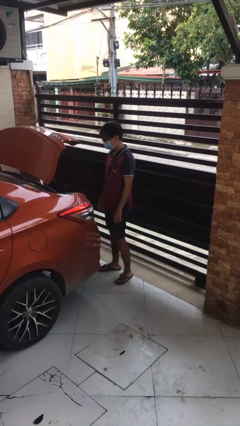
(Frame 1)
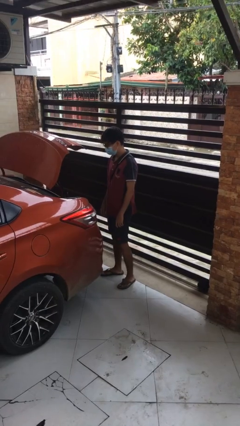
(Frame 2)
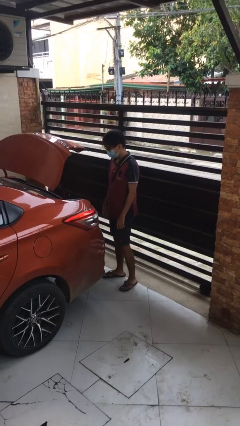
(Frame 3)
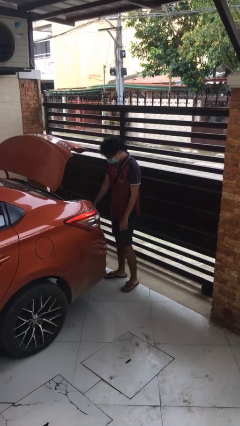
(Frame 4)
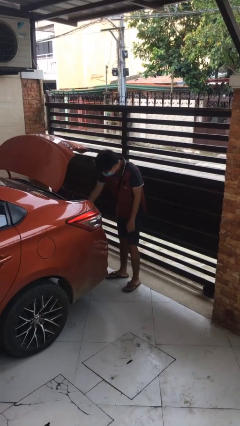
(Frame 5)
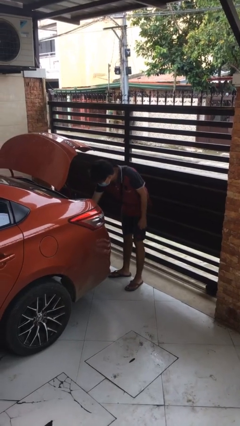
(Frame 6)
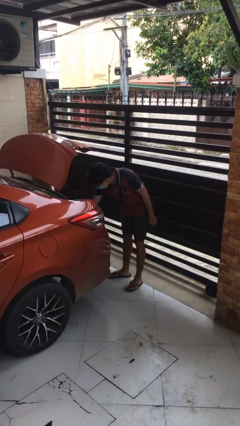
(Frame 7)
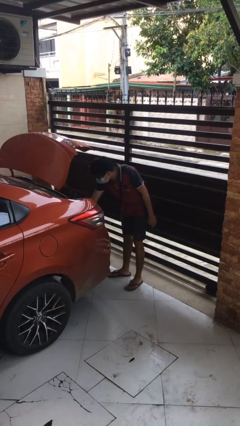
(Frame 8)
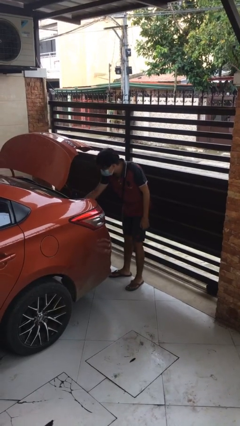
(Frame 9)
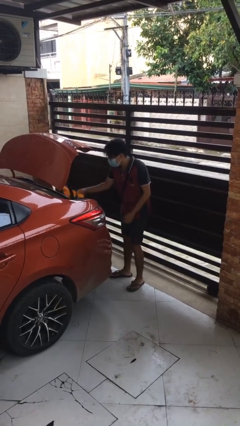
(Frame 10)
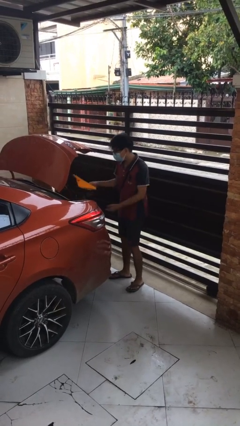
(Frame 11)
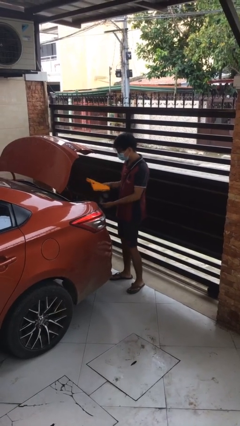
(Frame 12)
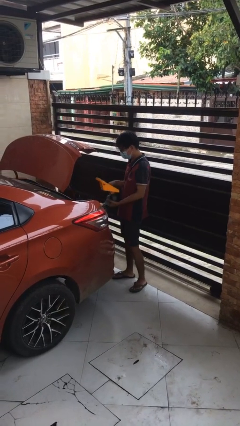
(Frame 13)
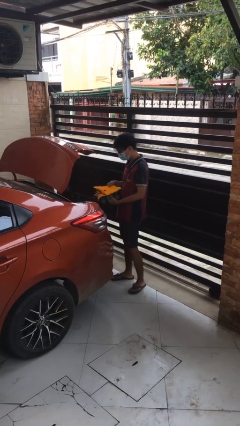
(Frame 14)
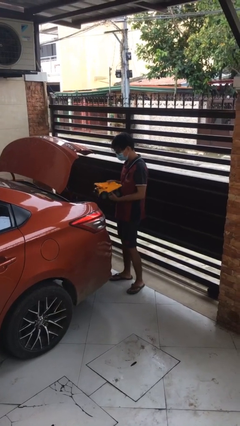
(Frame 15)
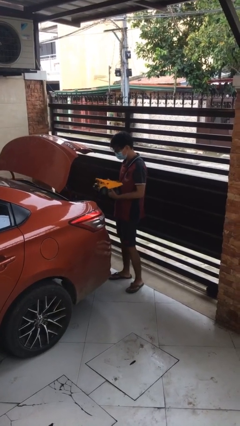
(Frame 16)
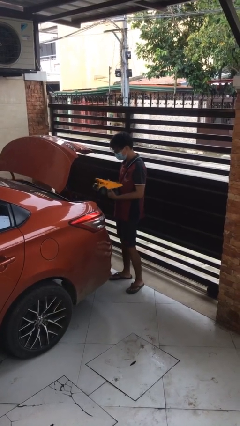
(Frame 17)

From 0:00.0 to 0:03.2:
person unloads car

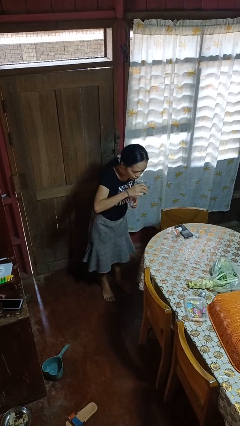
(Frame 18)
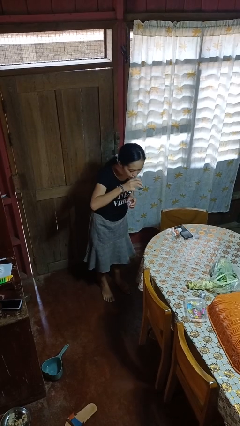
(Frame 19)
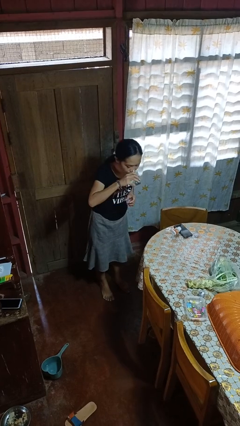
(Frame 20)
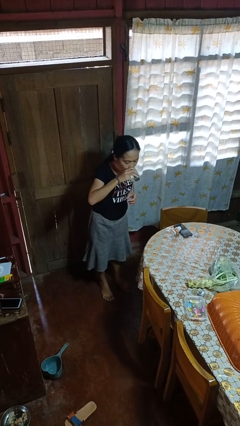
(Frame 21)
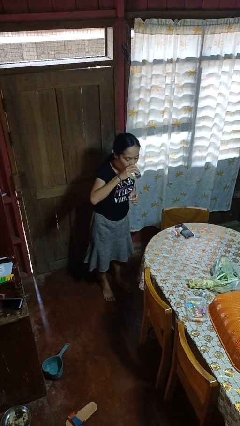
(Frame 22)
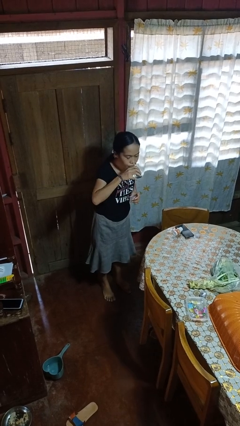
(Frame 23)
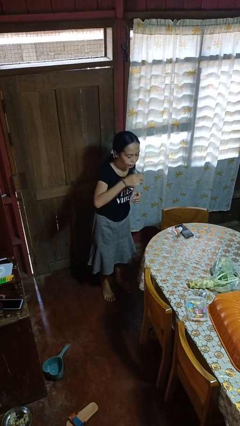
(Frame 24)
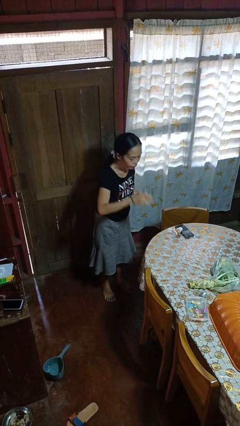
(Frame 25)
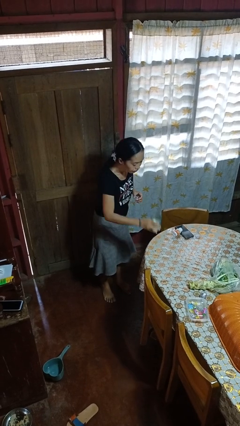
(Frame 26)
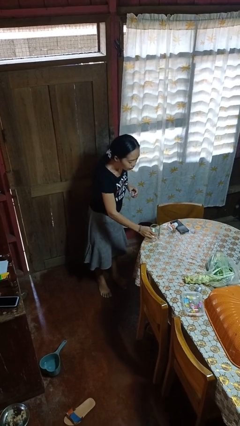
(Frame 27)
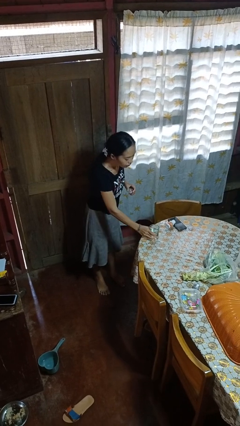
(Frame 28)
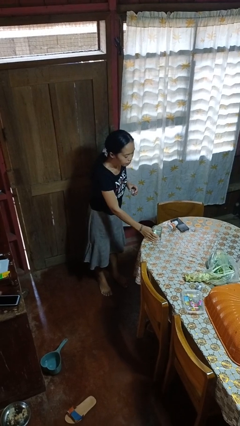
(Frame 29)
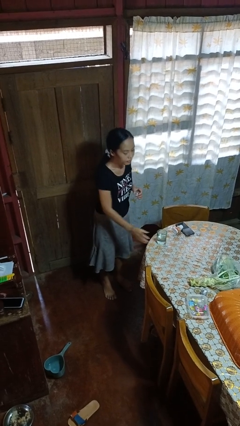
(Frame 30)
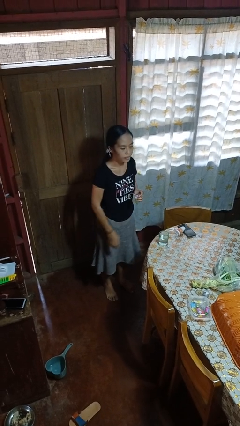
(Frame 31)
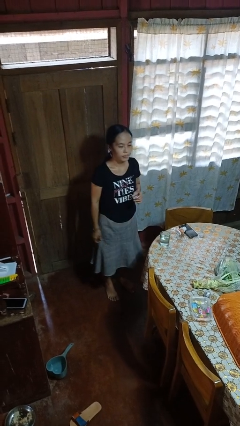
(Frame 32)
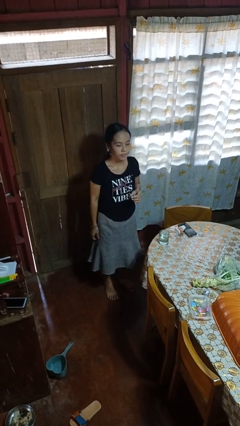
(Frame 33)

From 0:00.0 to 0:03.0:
person drinks from cup

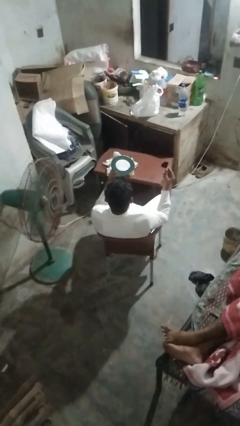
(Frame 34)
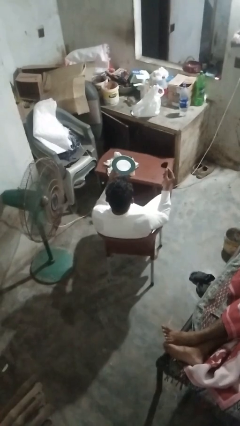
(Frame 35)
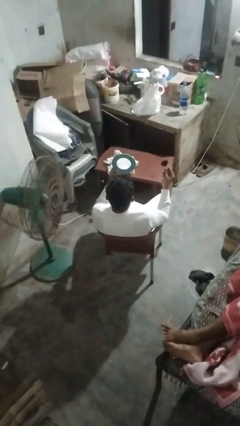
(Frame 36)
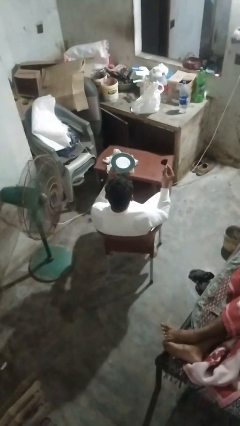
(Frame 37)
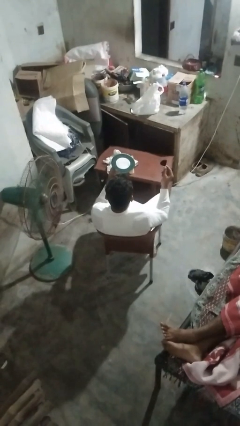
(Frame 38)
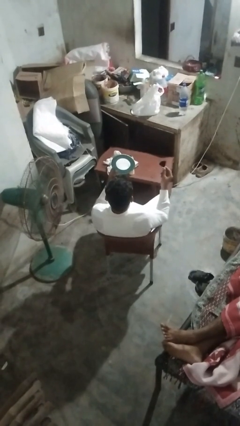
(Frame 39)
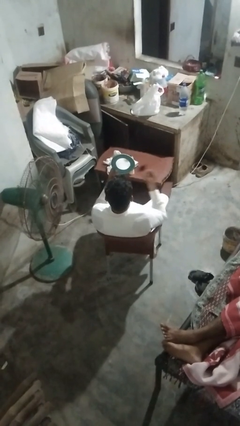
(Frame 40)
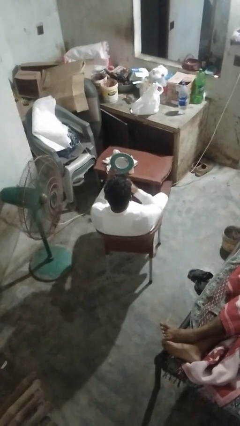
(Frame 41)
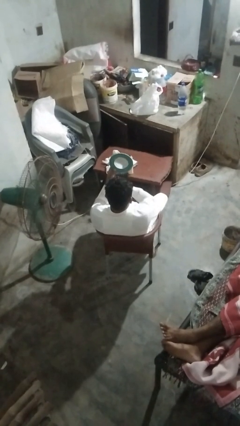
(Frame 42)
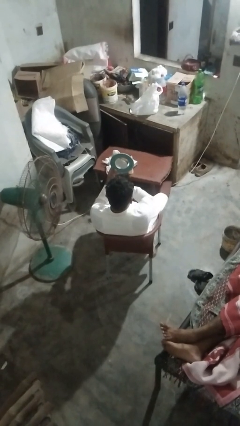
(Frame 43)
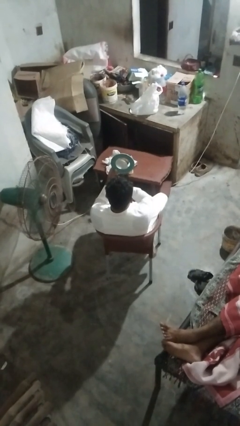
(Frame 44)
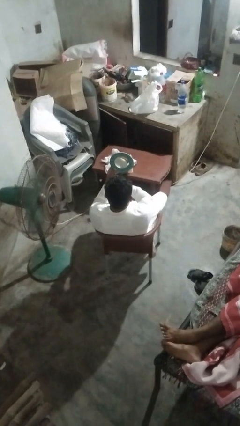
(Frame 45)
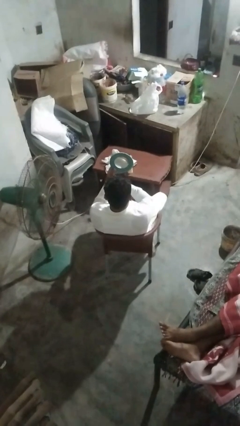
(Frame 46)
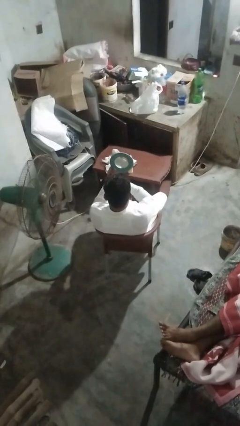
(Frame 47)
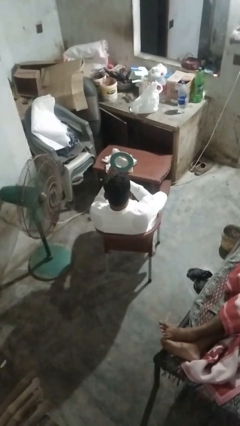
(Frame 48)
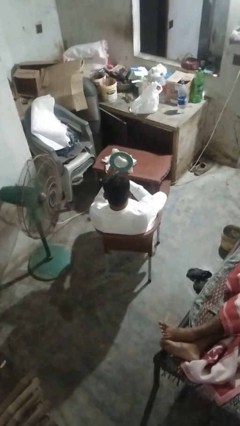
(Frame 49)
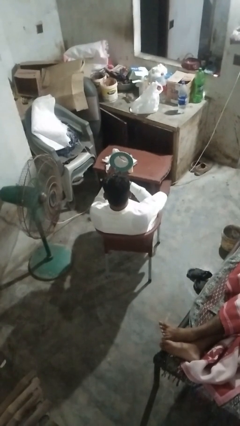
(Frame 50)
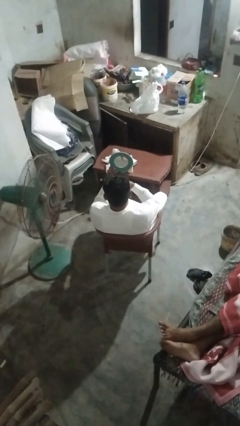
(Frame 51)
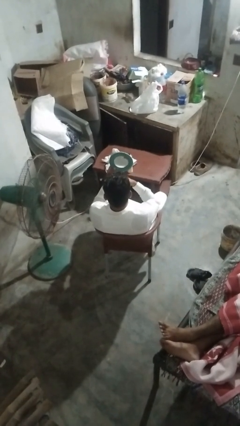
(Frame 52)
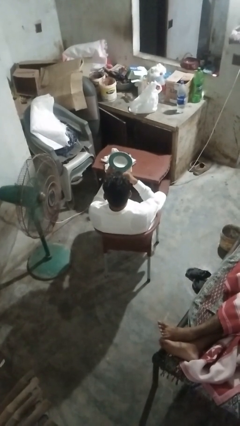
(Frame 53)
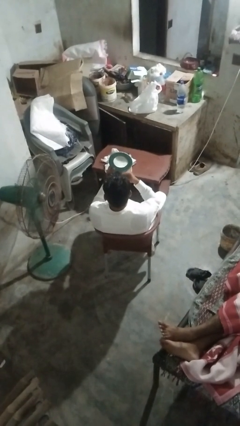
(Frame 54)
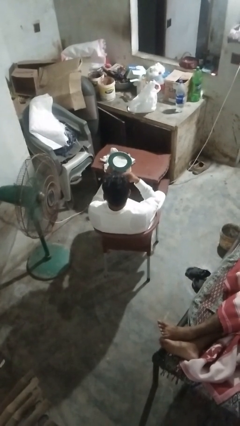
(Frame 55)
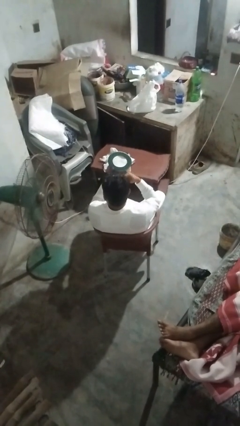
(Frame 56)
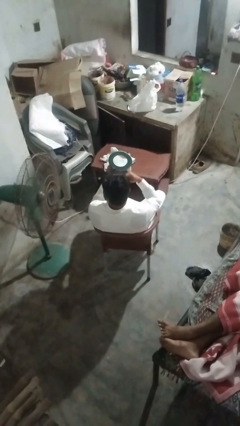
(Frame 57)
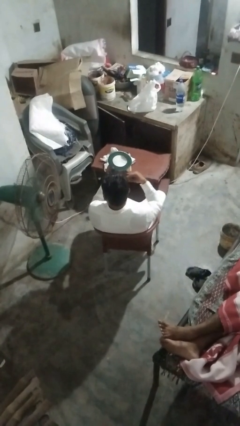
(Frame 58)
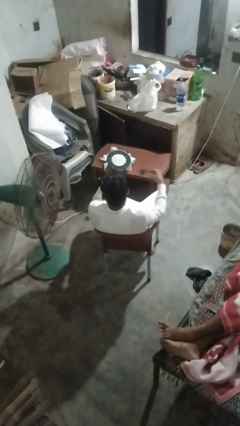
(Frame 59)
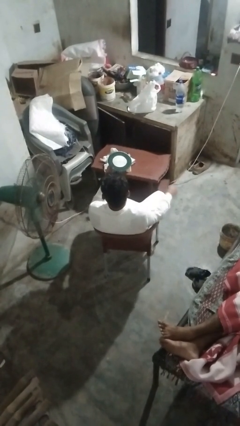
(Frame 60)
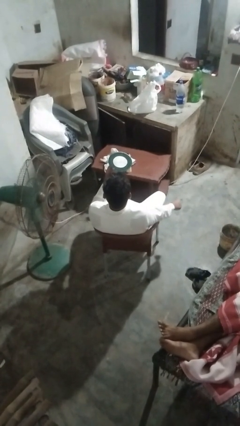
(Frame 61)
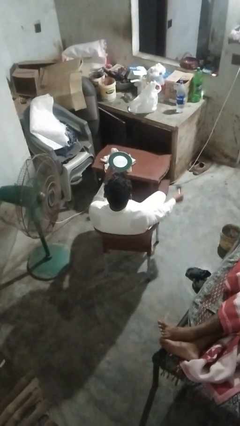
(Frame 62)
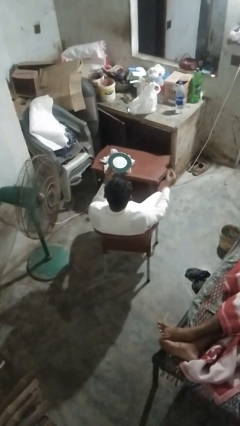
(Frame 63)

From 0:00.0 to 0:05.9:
person applies foundation makeup

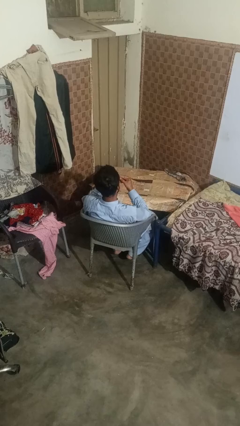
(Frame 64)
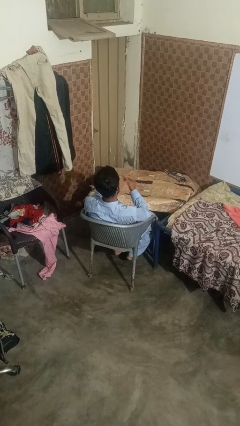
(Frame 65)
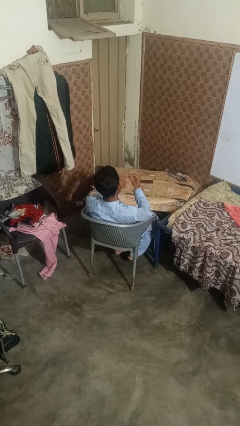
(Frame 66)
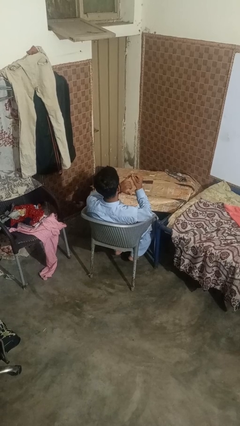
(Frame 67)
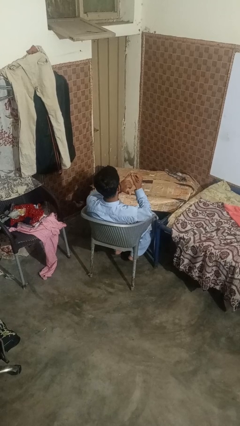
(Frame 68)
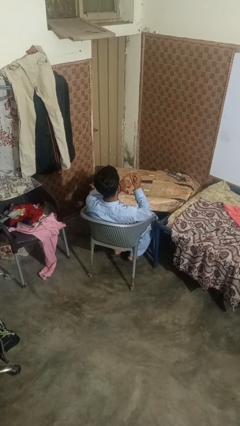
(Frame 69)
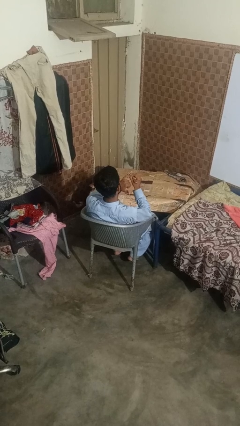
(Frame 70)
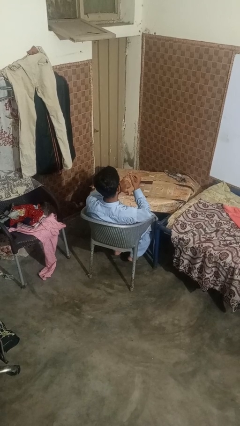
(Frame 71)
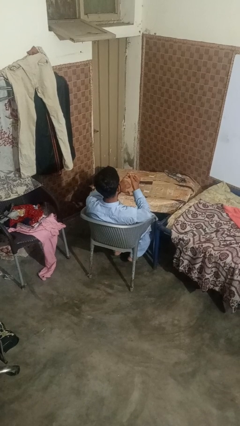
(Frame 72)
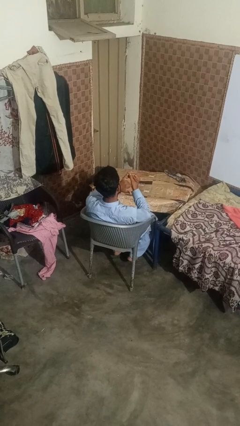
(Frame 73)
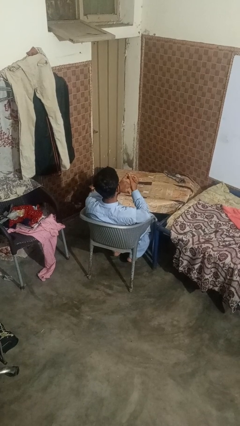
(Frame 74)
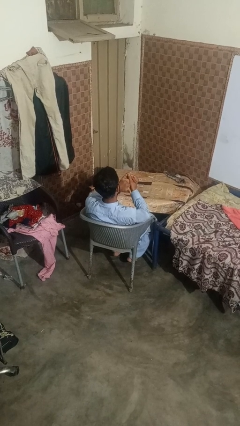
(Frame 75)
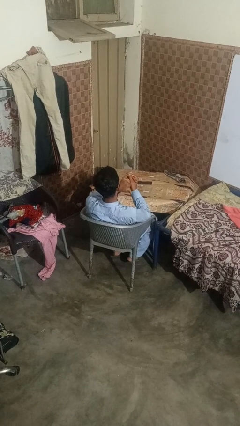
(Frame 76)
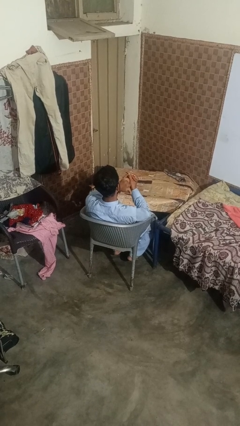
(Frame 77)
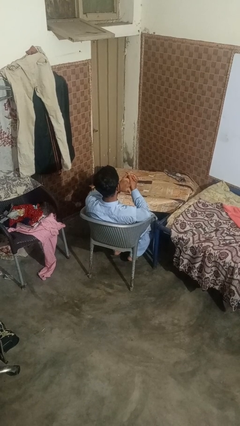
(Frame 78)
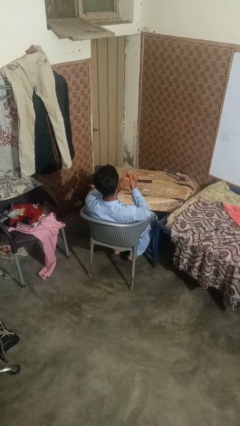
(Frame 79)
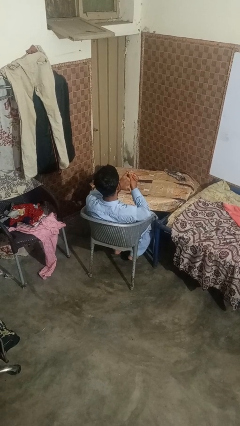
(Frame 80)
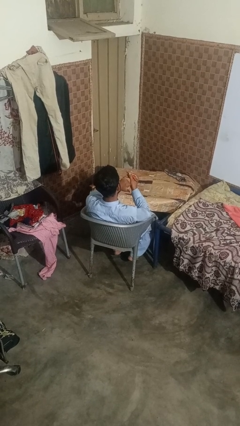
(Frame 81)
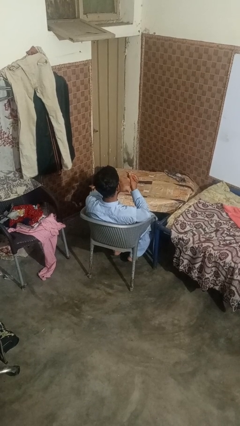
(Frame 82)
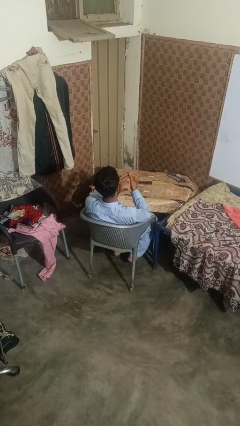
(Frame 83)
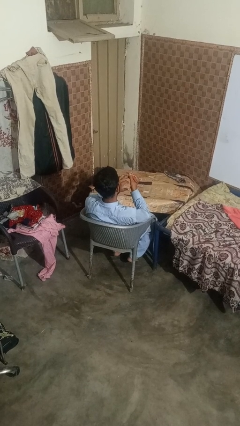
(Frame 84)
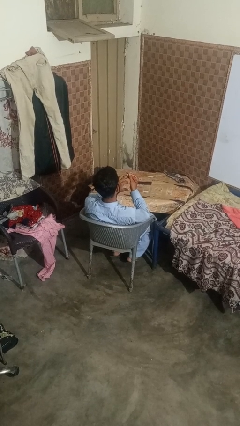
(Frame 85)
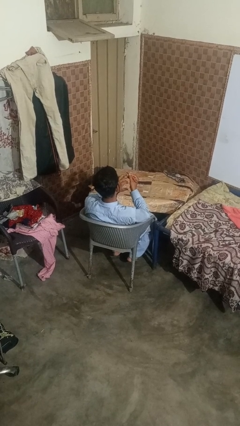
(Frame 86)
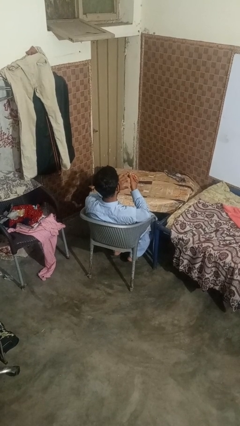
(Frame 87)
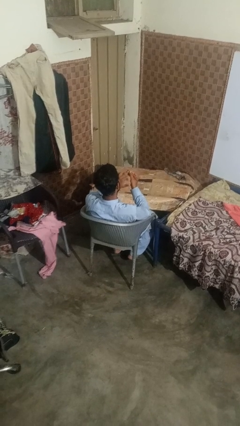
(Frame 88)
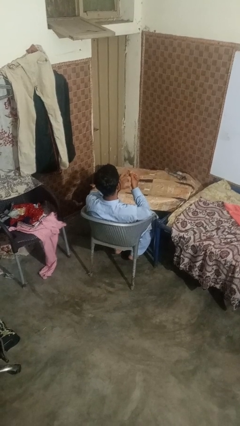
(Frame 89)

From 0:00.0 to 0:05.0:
person files fingernails

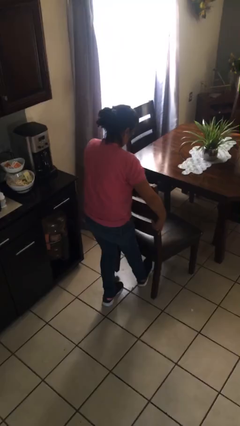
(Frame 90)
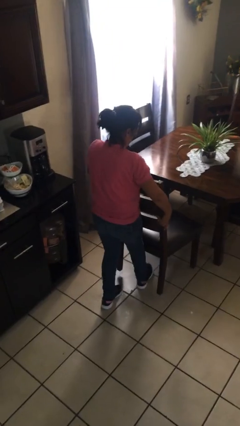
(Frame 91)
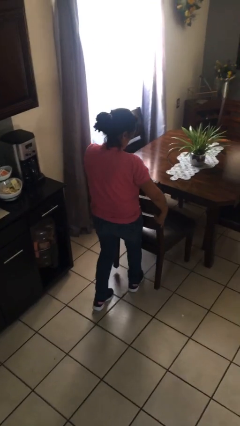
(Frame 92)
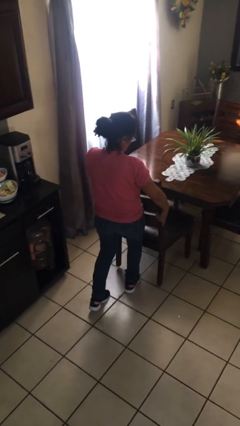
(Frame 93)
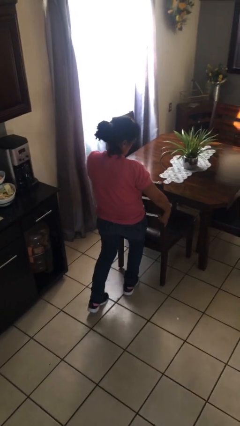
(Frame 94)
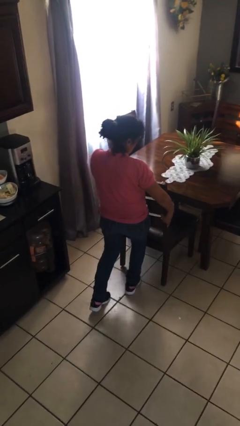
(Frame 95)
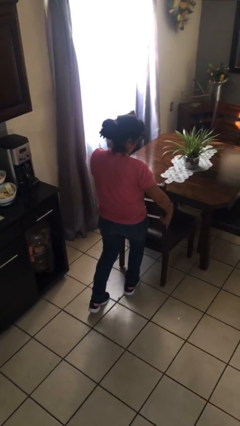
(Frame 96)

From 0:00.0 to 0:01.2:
person pushes in chair
